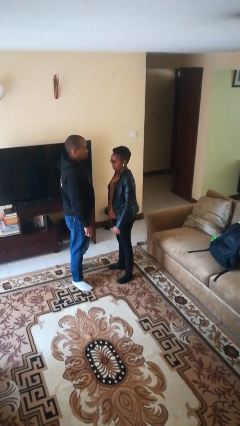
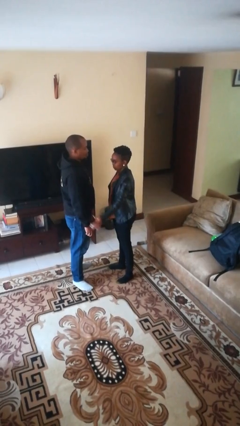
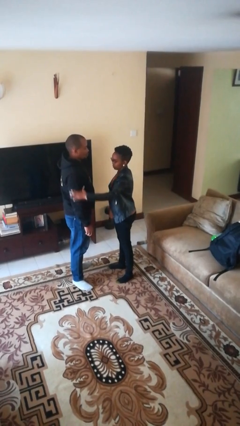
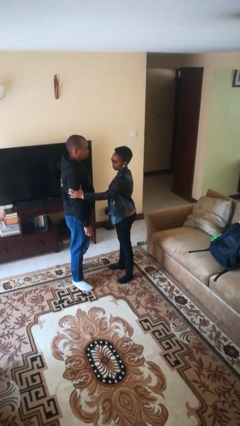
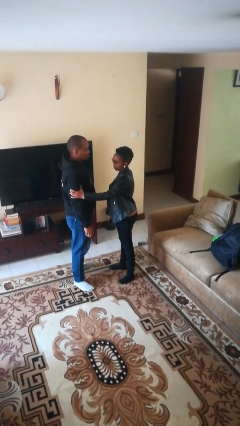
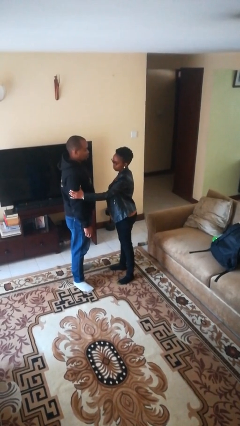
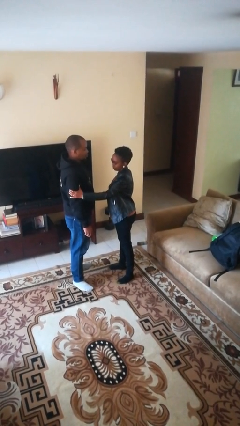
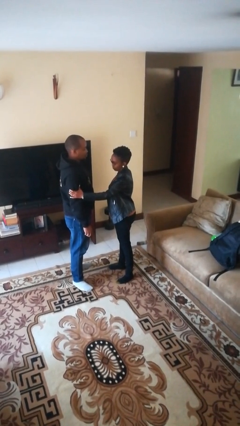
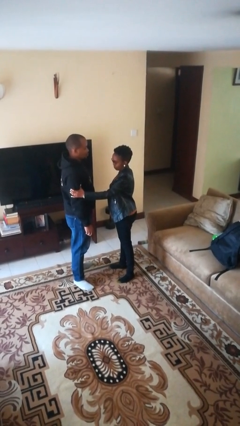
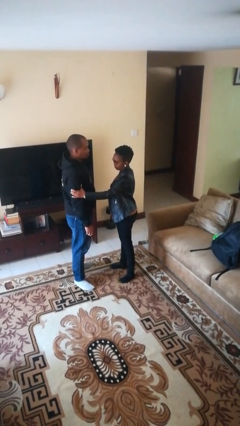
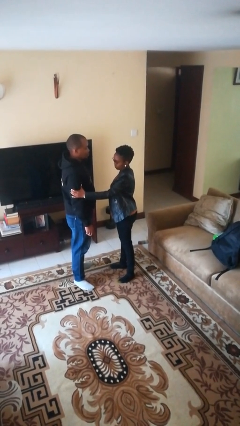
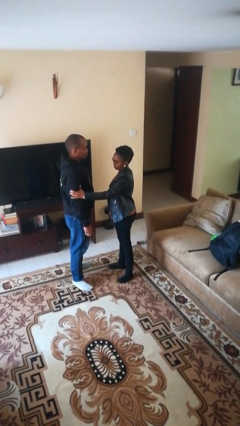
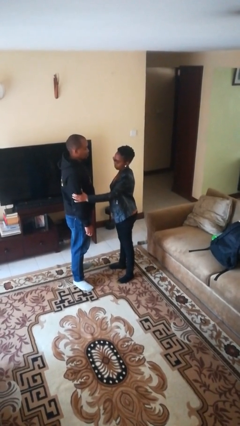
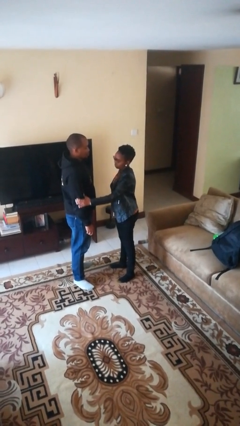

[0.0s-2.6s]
person grabs person by bicep

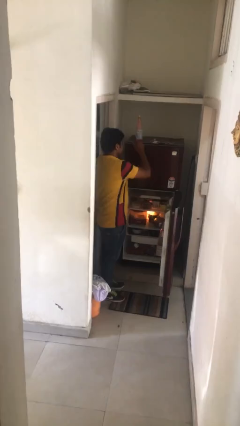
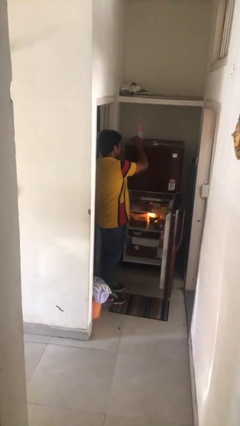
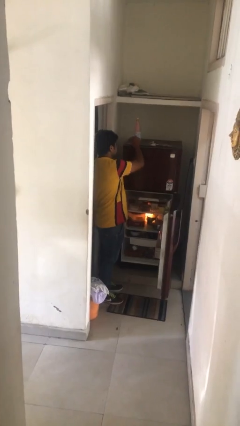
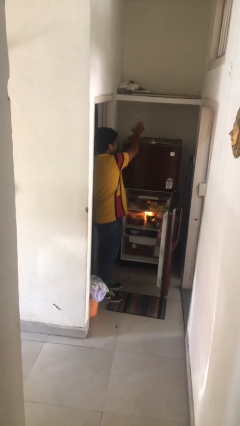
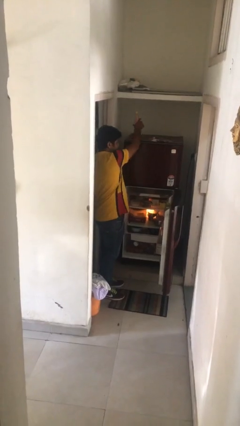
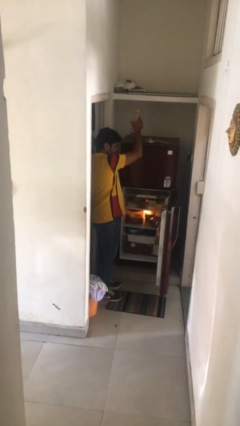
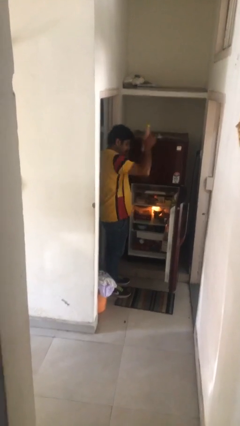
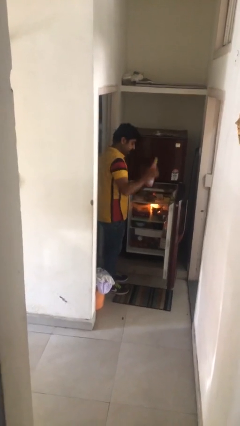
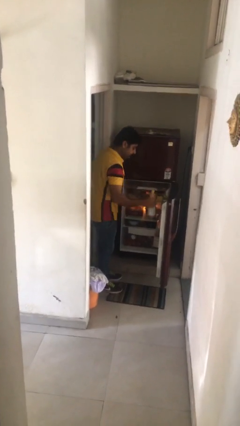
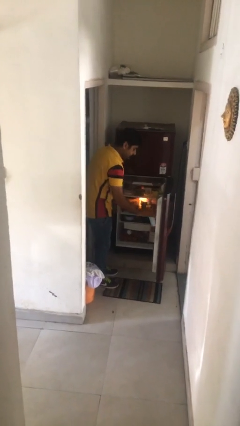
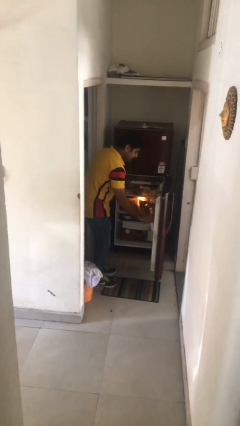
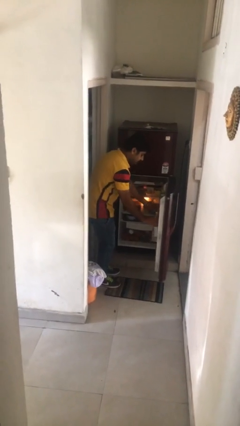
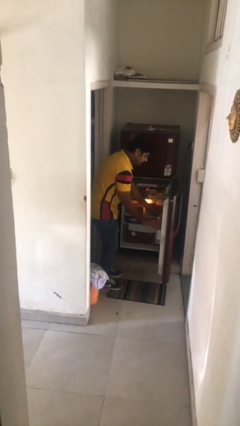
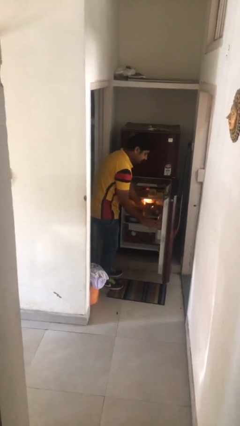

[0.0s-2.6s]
person loads groceries into refrigerator

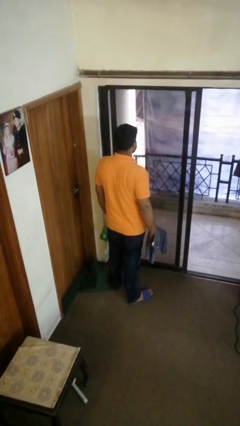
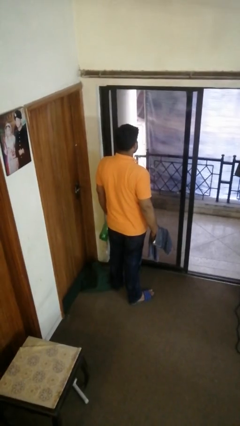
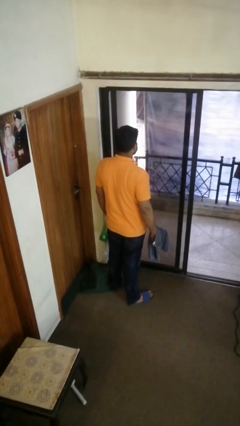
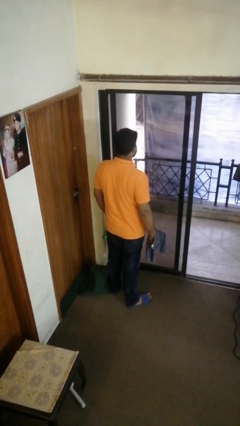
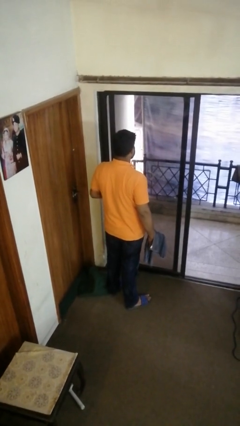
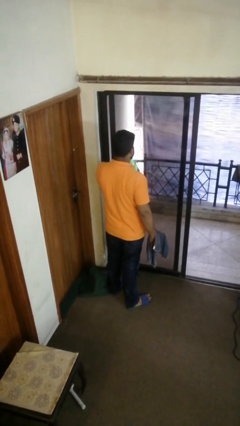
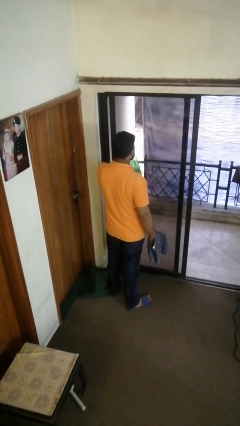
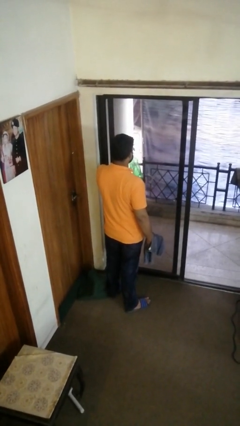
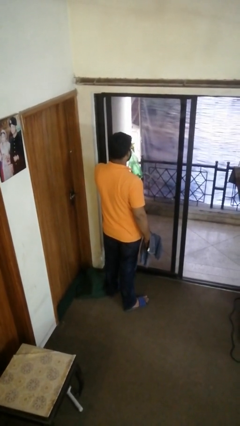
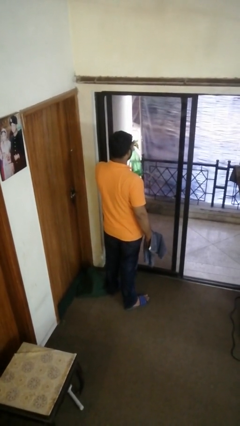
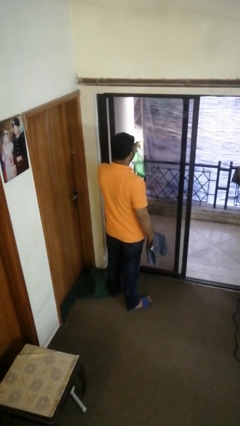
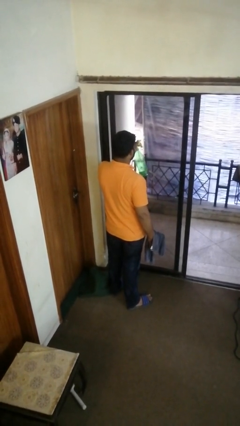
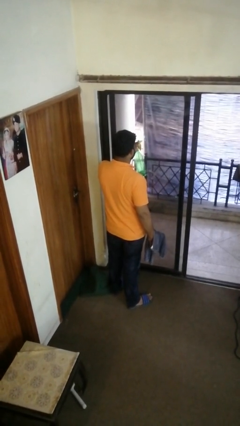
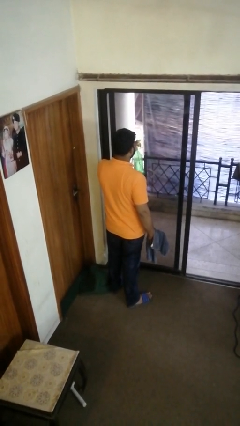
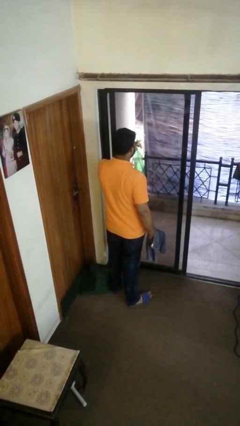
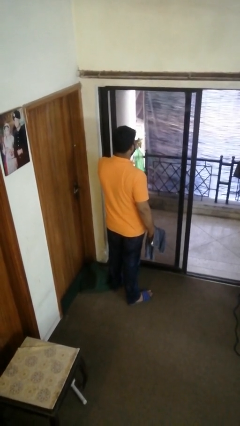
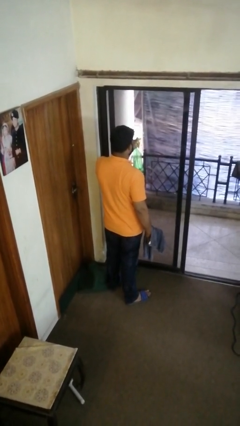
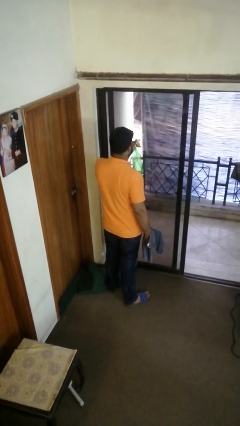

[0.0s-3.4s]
person sprays from bottle

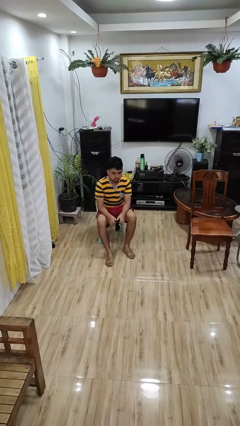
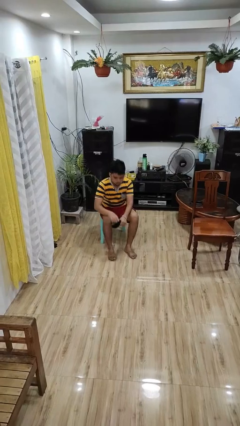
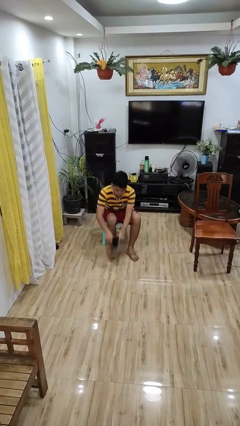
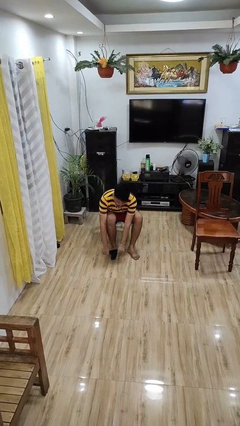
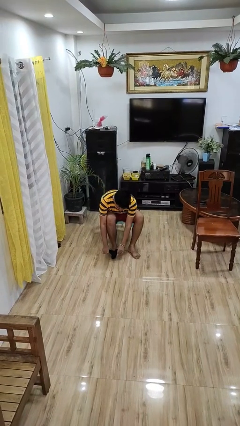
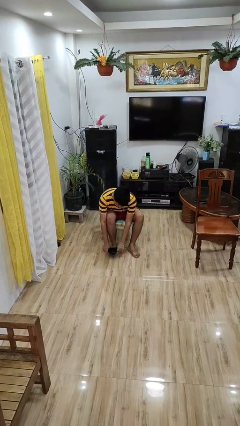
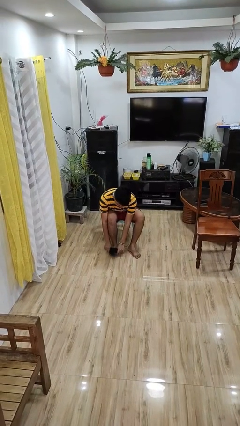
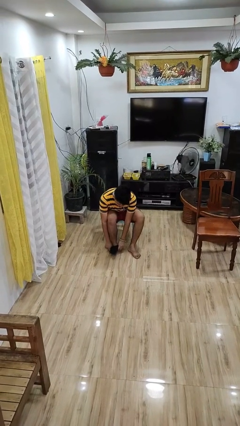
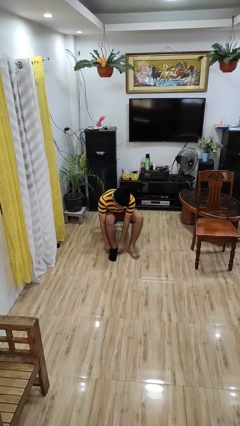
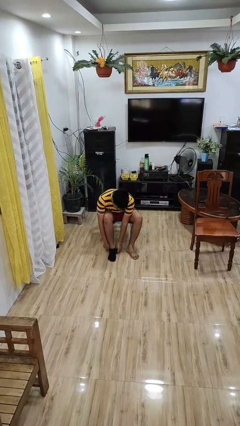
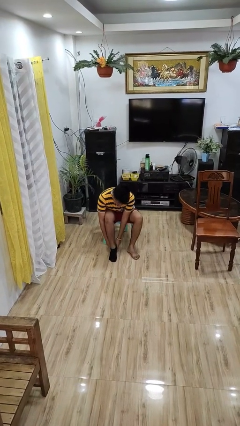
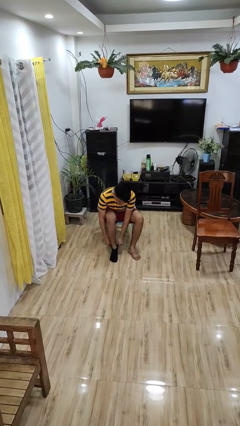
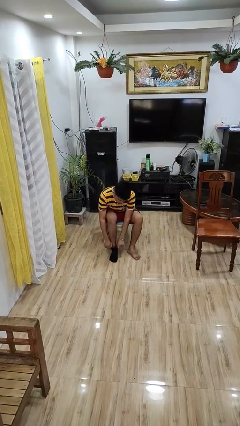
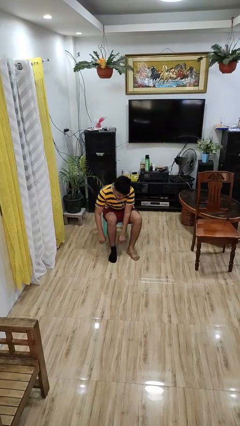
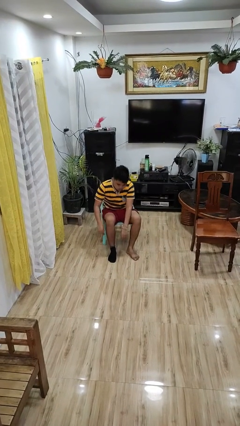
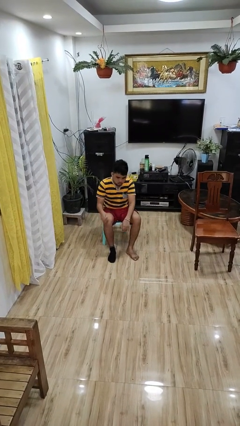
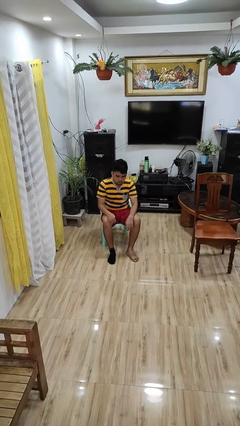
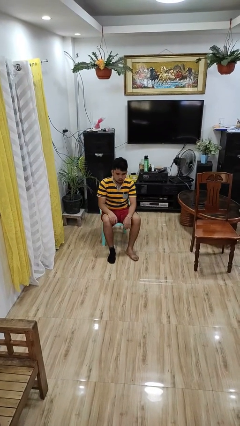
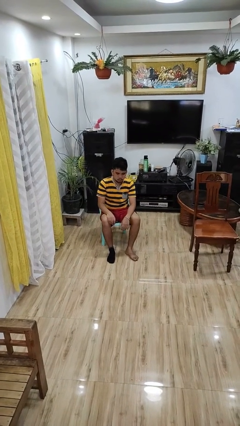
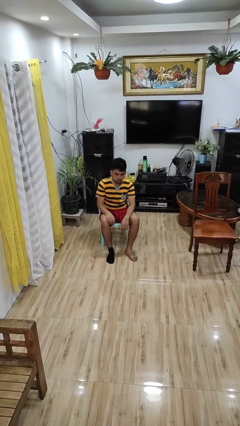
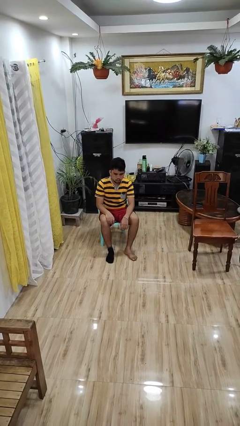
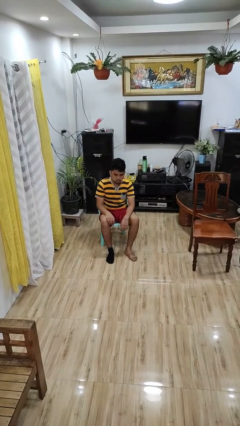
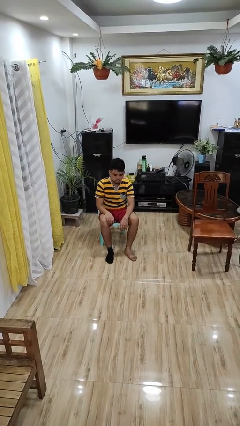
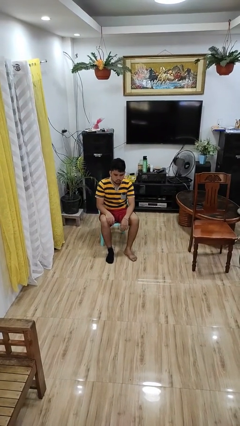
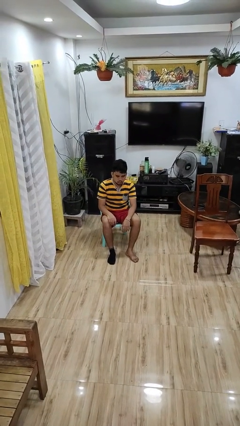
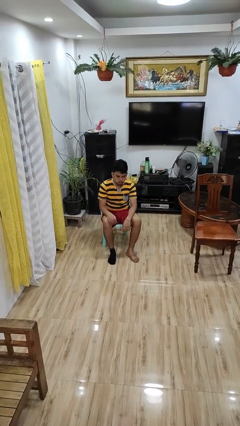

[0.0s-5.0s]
person puts on socks

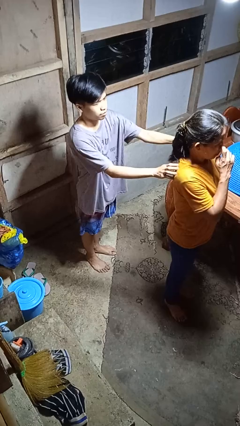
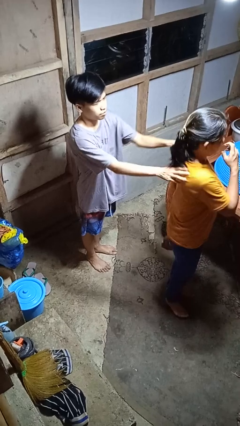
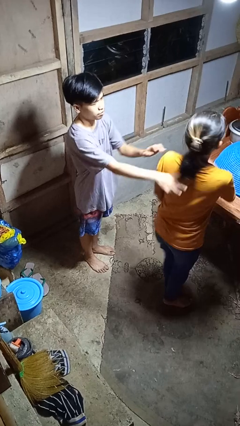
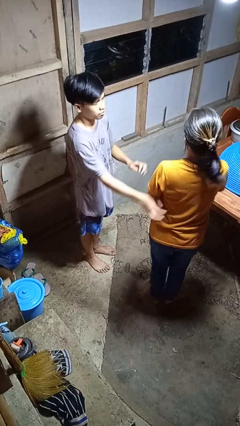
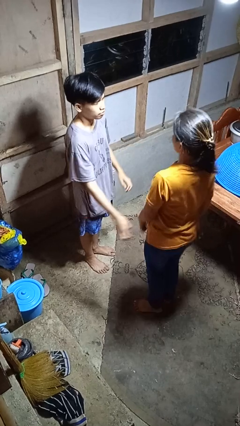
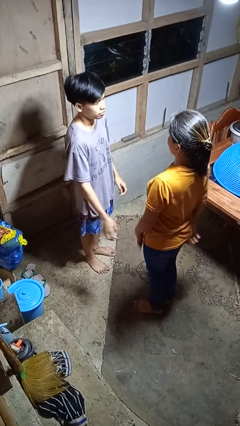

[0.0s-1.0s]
person spins person around

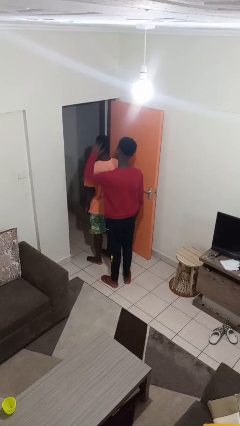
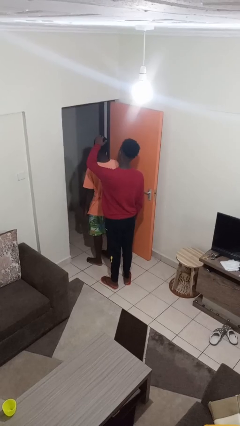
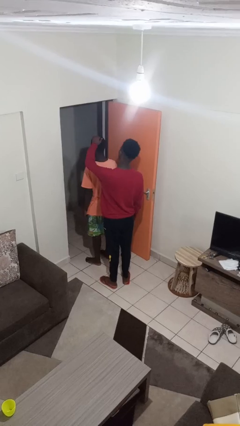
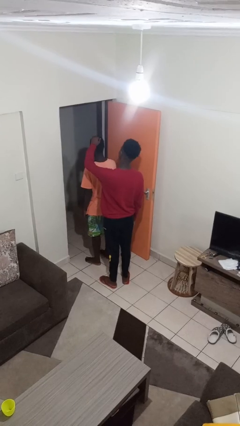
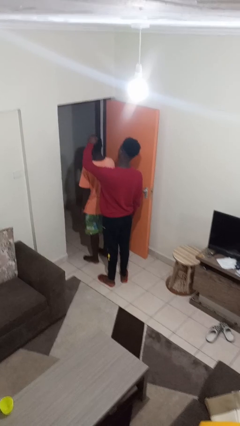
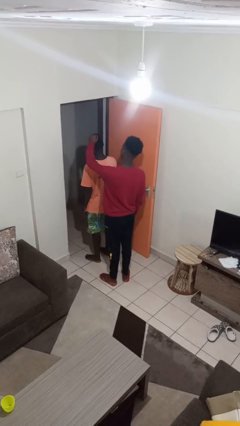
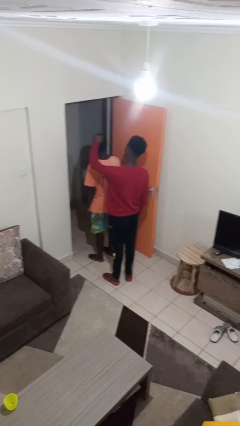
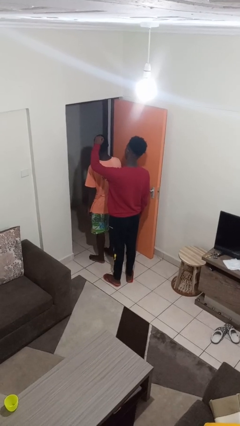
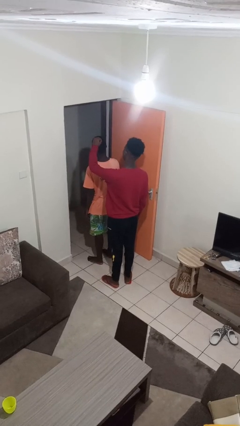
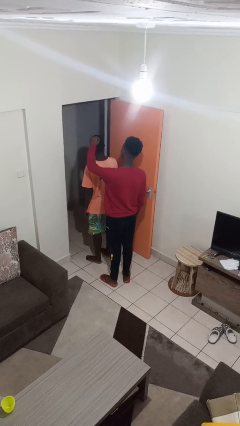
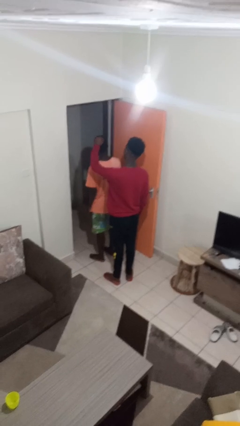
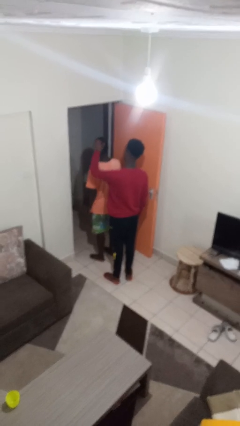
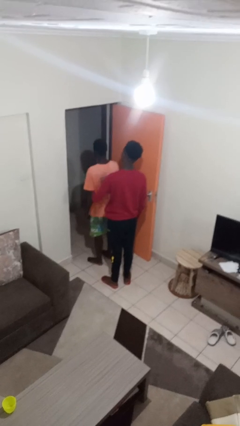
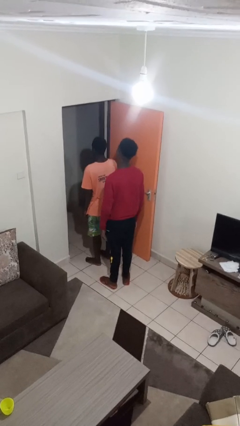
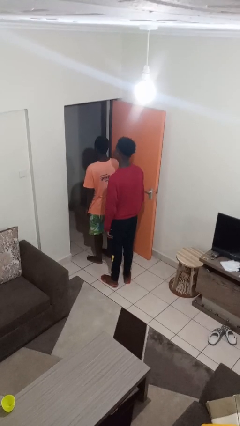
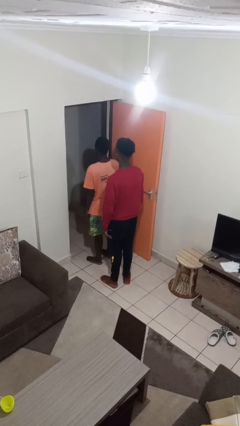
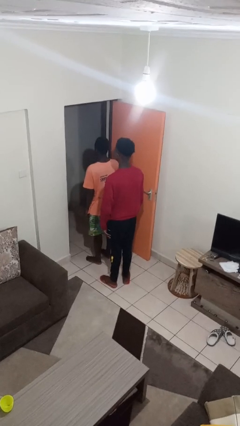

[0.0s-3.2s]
person grabs person by hair
